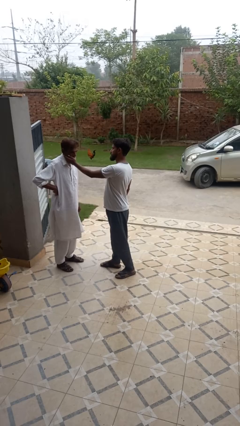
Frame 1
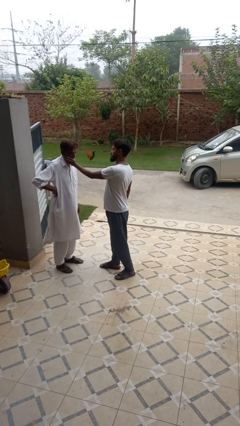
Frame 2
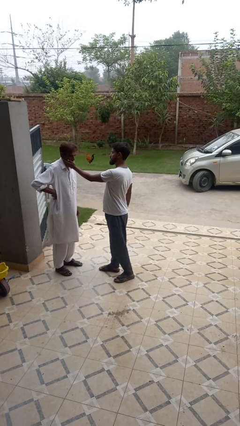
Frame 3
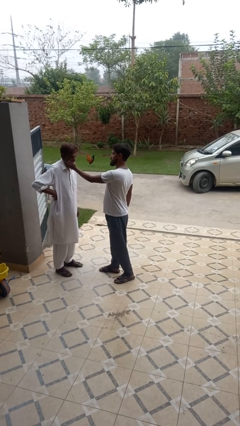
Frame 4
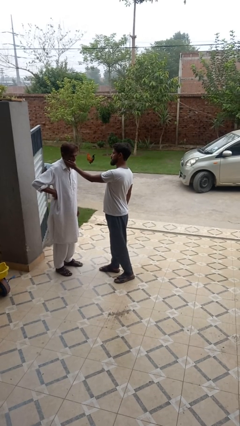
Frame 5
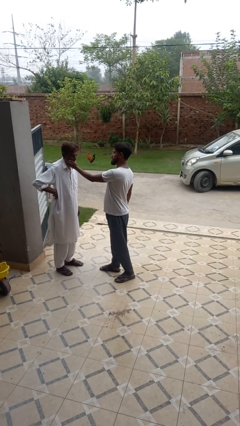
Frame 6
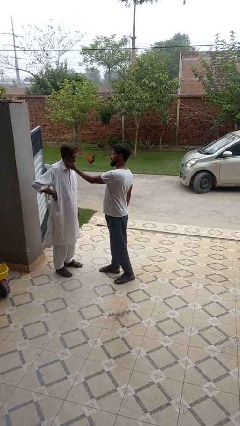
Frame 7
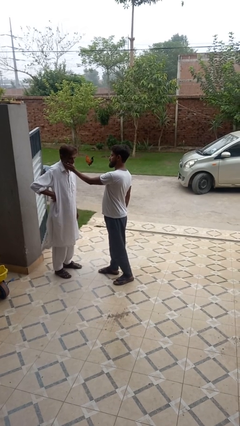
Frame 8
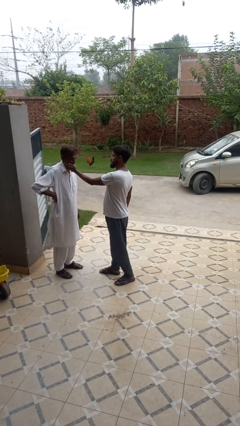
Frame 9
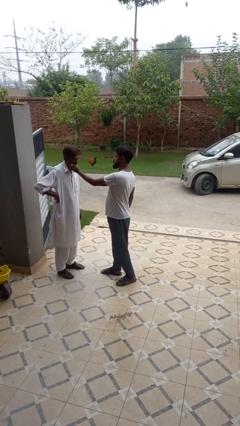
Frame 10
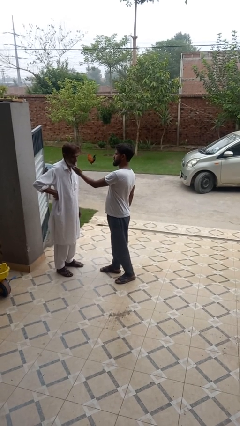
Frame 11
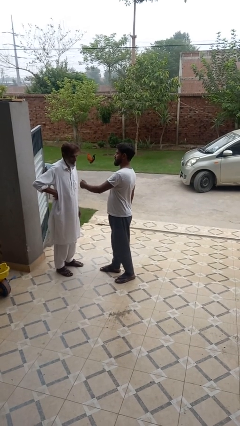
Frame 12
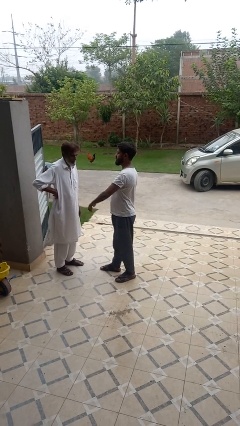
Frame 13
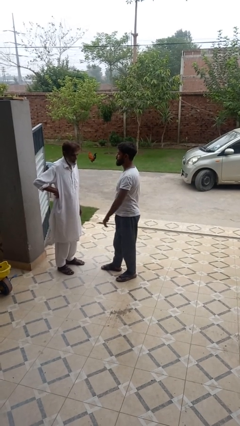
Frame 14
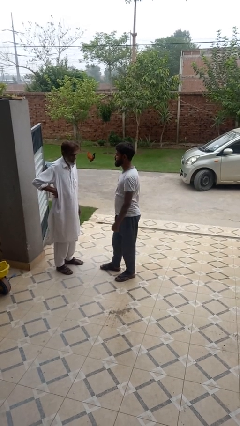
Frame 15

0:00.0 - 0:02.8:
person touches face of person

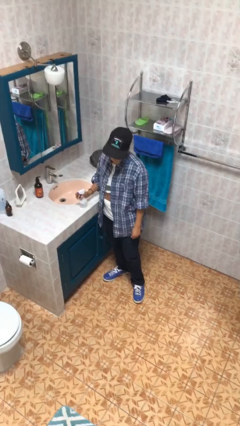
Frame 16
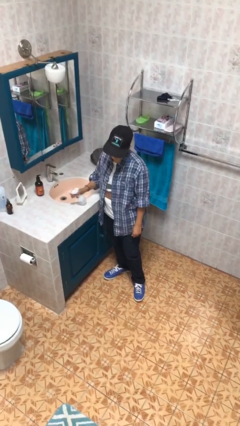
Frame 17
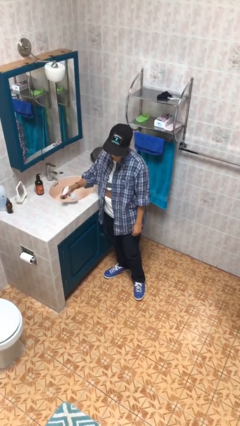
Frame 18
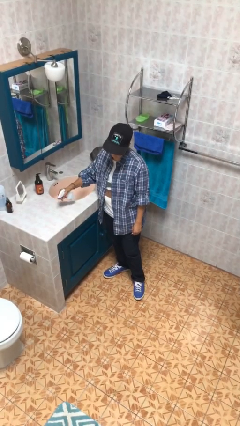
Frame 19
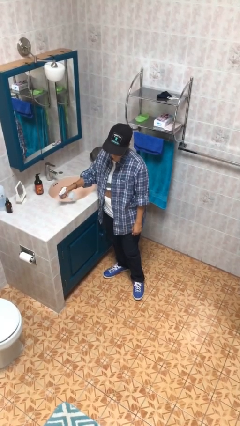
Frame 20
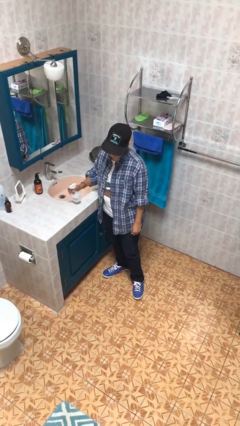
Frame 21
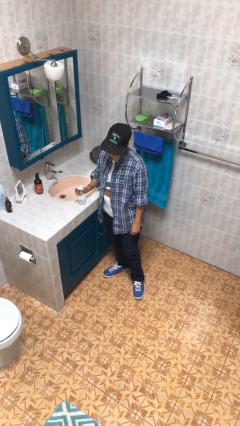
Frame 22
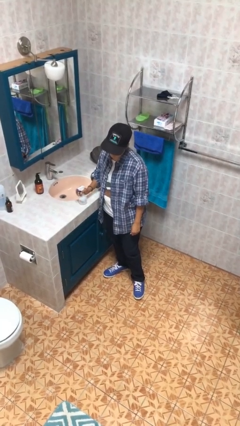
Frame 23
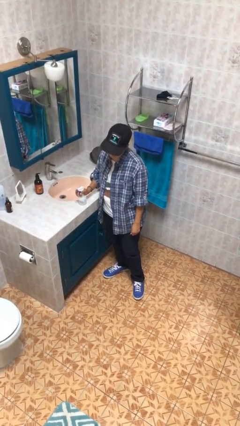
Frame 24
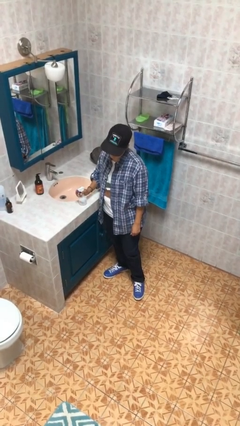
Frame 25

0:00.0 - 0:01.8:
person sprays from bottle

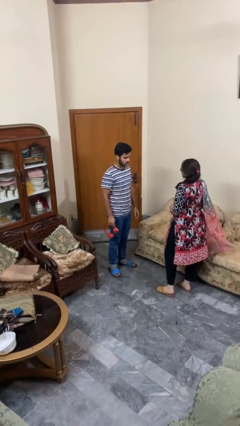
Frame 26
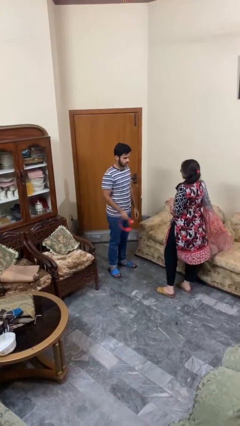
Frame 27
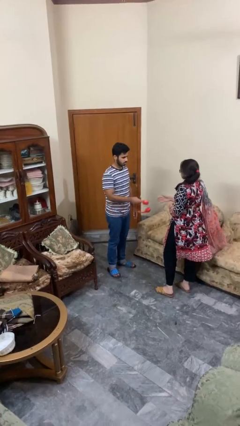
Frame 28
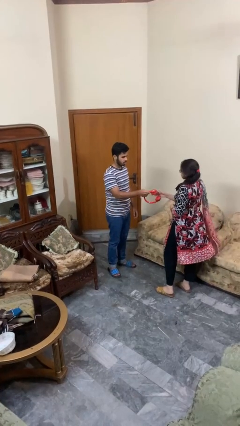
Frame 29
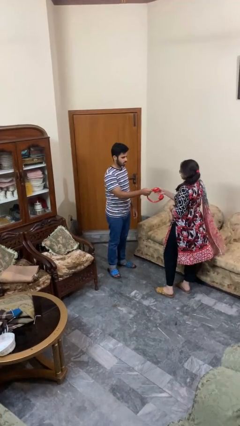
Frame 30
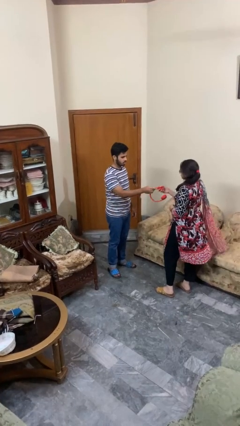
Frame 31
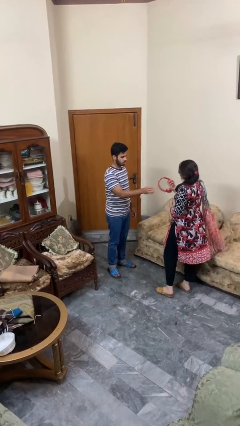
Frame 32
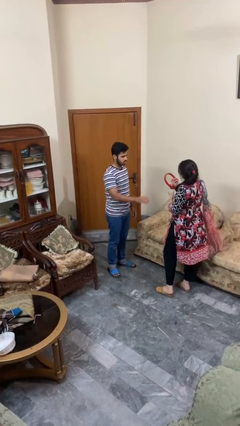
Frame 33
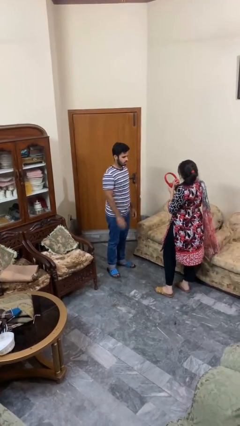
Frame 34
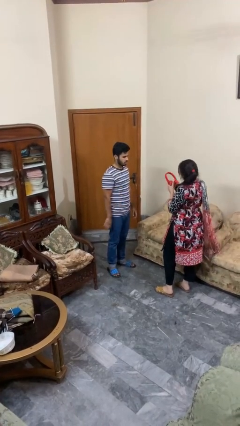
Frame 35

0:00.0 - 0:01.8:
person transfers object to person

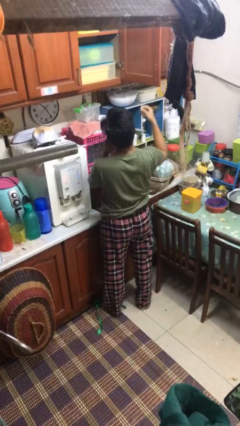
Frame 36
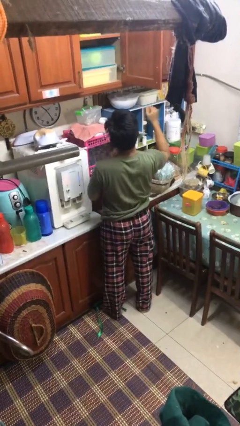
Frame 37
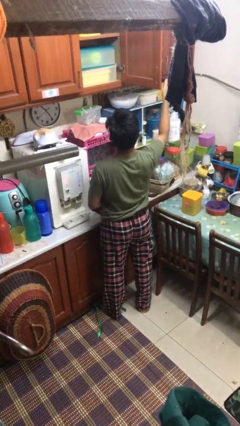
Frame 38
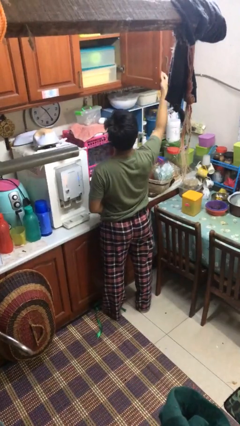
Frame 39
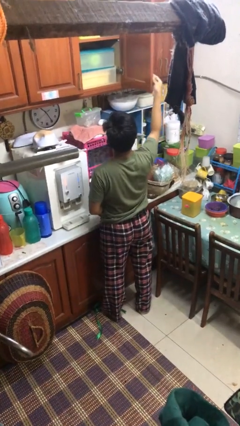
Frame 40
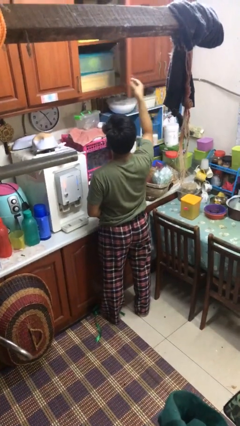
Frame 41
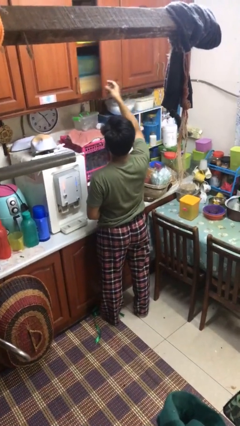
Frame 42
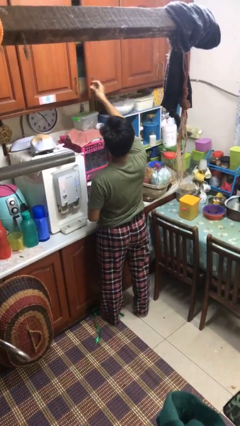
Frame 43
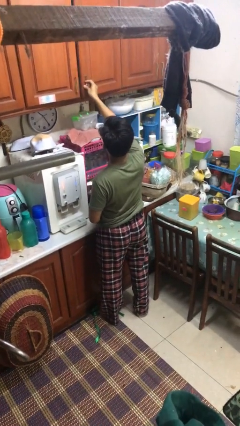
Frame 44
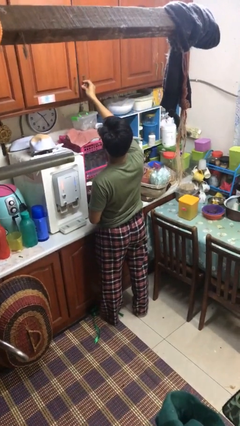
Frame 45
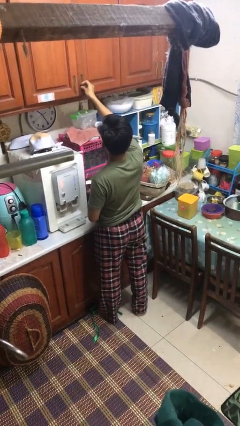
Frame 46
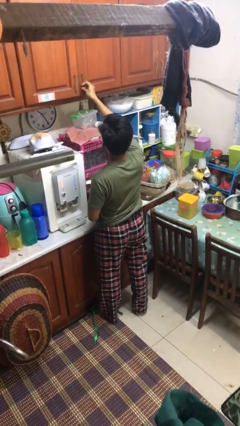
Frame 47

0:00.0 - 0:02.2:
person closes kitchen drawer

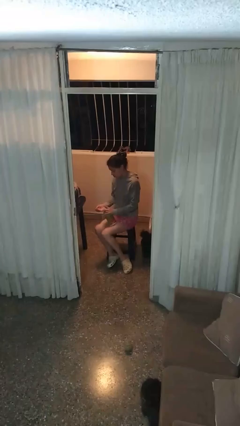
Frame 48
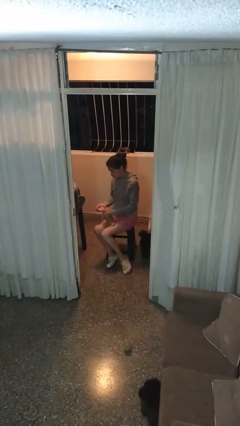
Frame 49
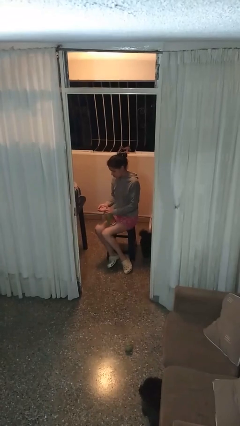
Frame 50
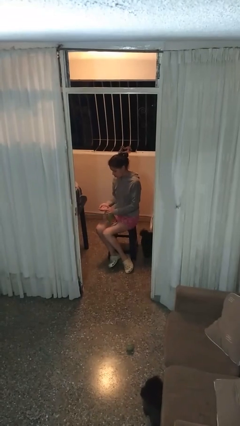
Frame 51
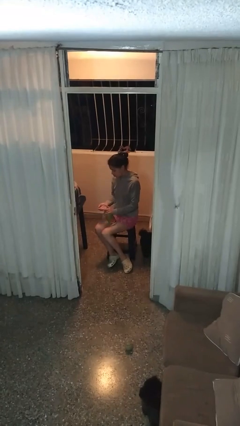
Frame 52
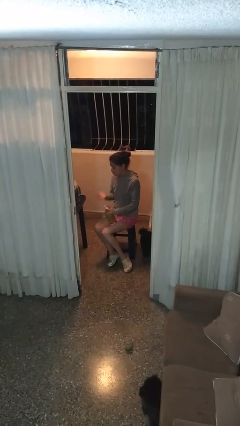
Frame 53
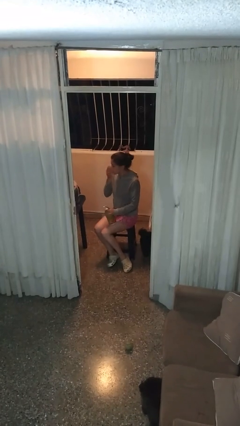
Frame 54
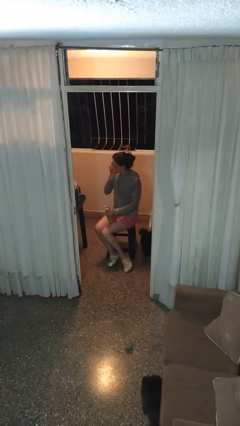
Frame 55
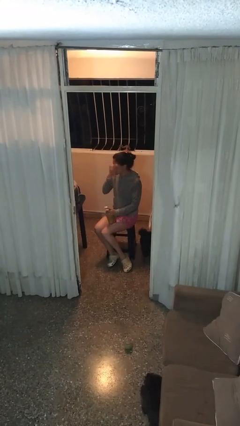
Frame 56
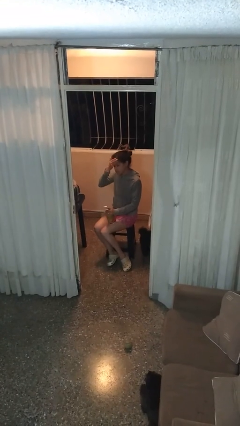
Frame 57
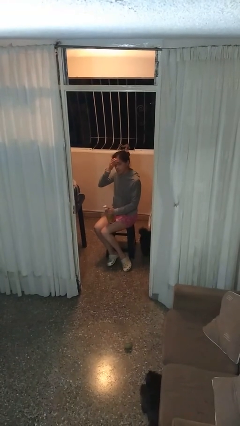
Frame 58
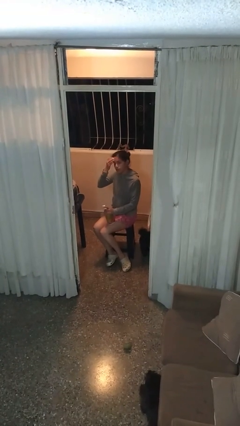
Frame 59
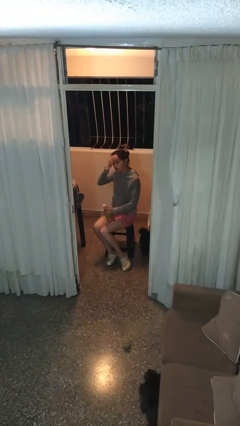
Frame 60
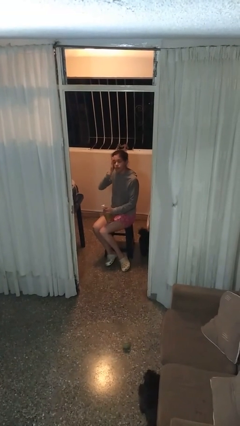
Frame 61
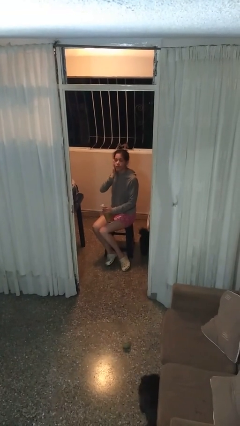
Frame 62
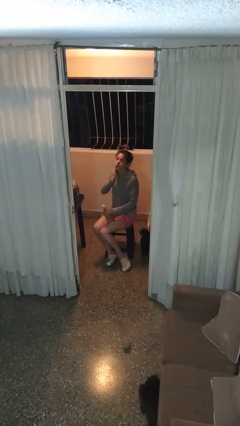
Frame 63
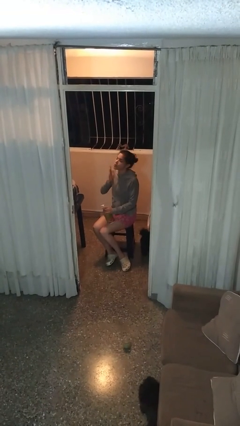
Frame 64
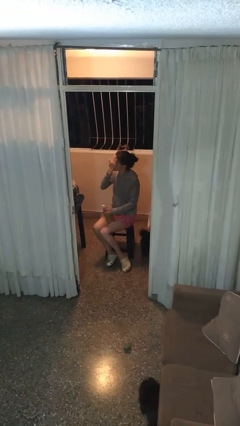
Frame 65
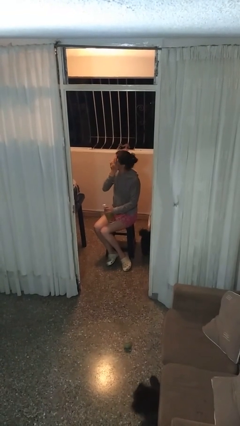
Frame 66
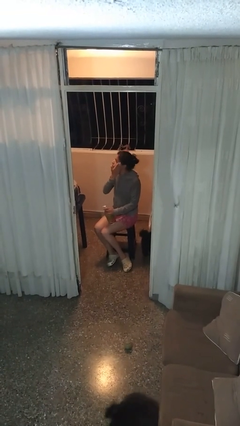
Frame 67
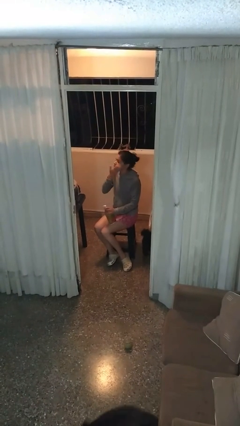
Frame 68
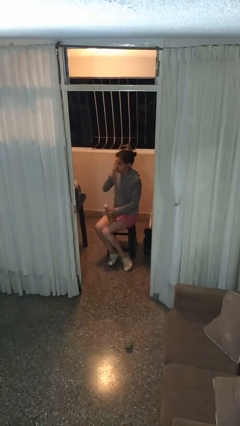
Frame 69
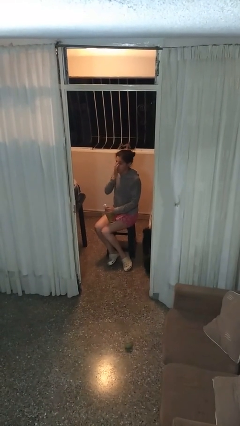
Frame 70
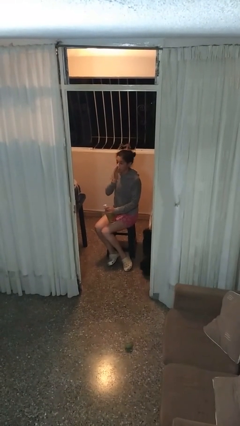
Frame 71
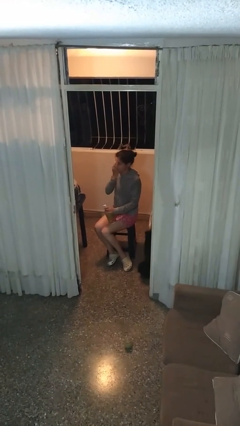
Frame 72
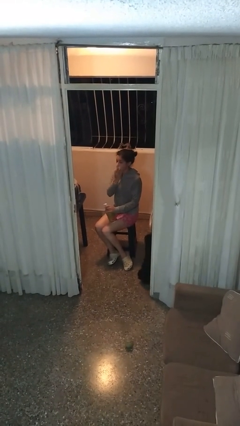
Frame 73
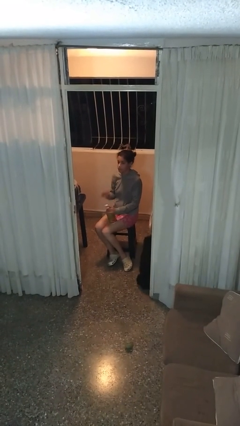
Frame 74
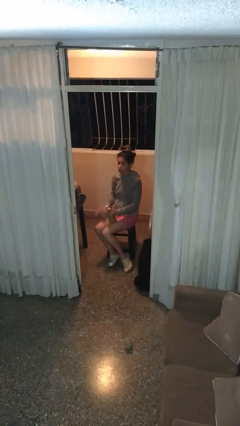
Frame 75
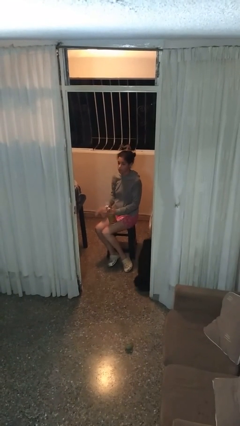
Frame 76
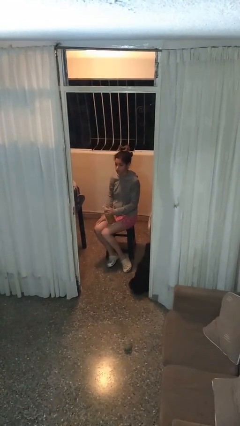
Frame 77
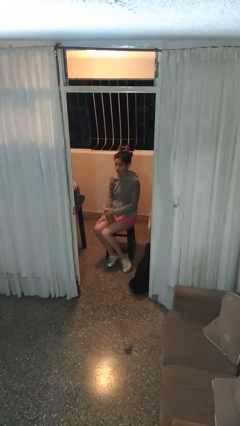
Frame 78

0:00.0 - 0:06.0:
person applies facial moisturizer

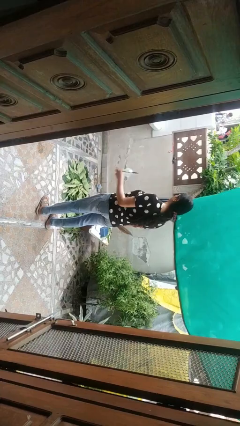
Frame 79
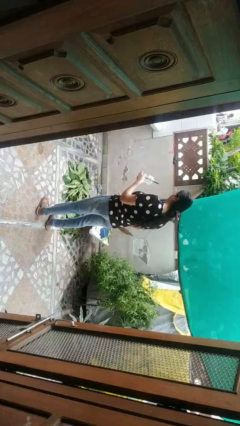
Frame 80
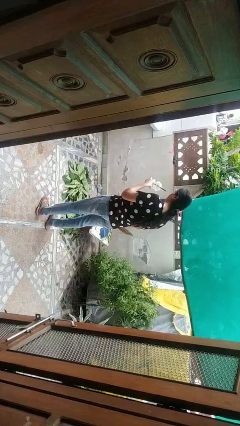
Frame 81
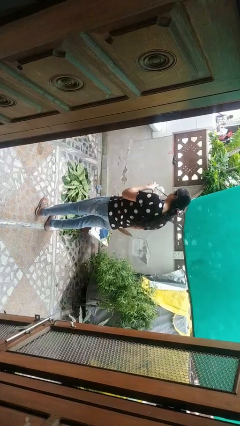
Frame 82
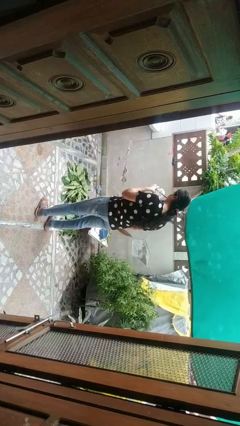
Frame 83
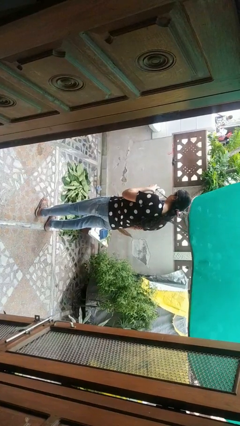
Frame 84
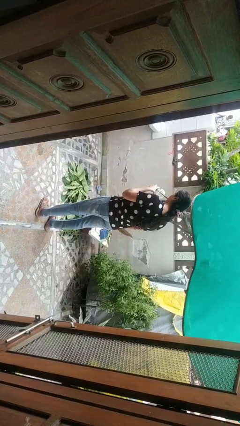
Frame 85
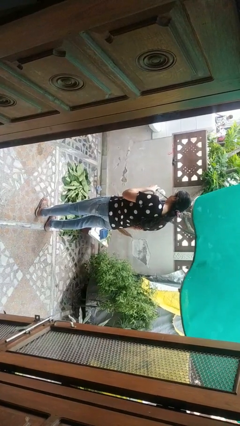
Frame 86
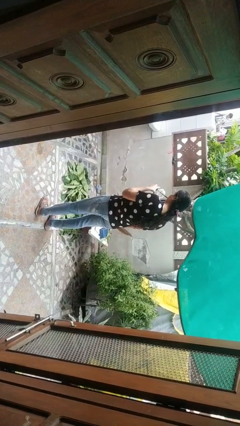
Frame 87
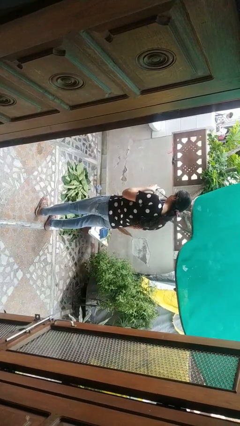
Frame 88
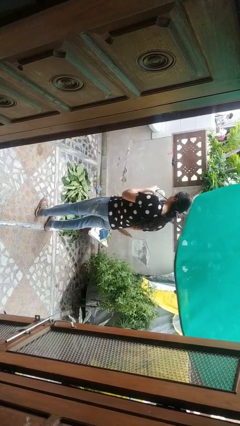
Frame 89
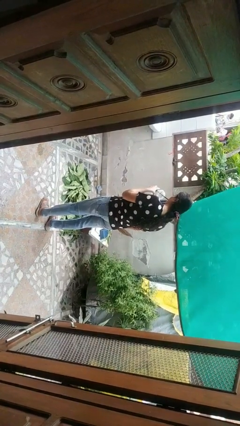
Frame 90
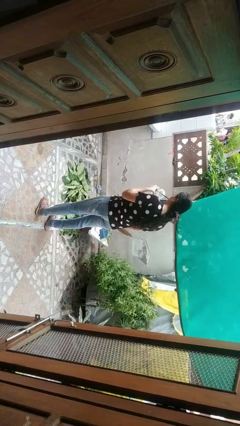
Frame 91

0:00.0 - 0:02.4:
person drinks from straw

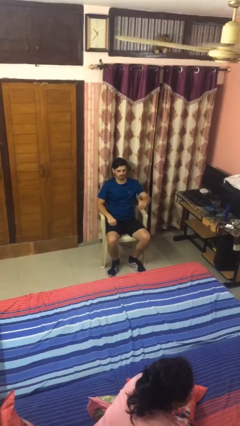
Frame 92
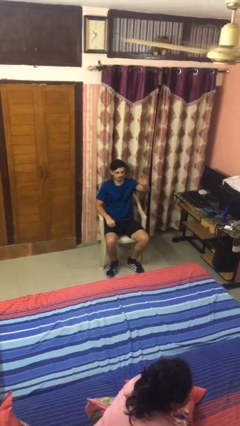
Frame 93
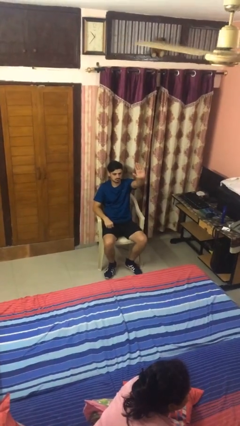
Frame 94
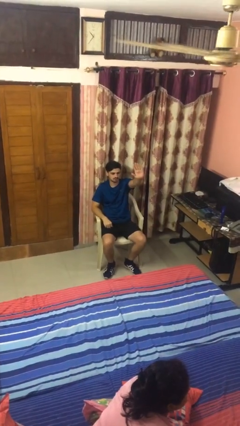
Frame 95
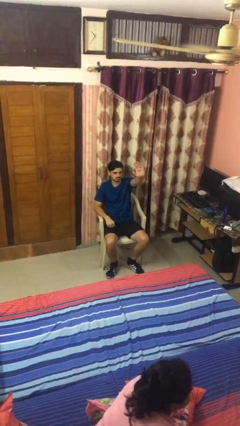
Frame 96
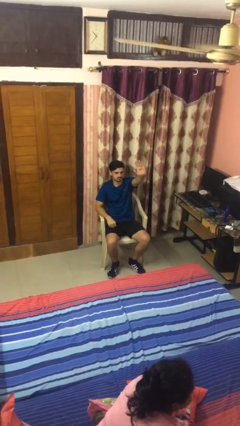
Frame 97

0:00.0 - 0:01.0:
person gestures raise hand
